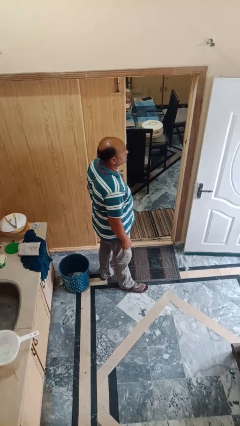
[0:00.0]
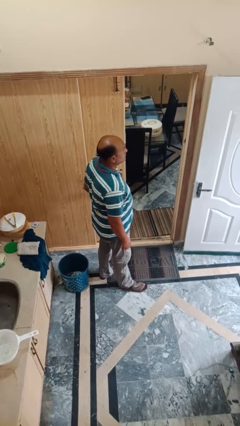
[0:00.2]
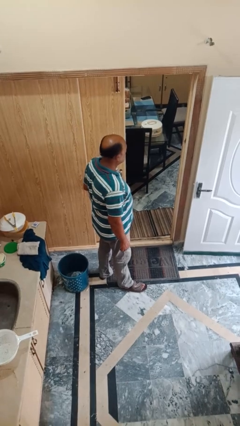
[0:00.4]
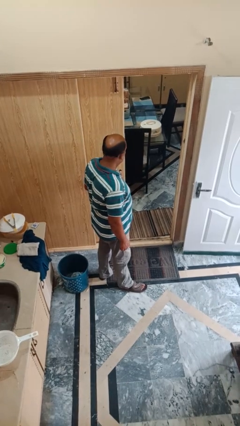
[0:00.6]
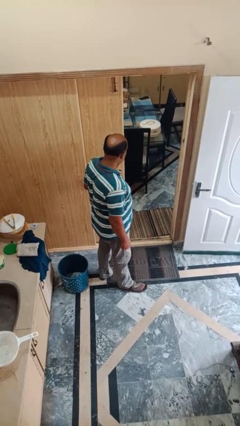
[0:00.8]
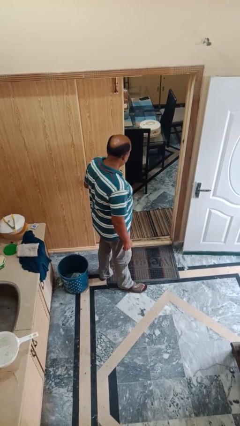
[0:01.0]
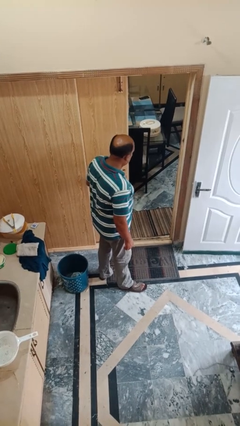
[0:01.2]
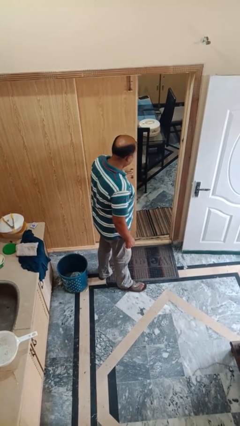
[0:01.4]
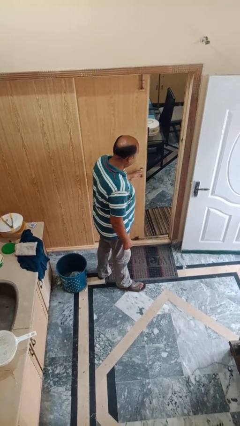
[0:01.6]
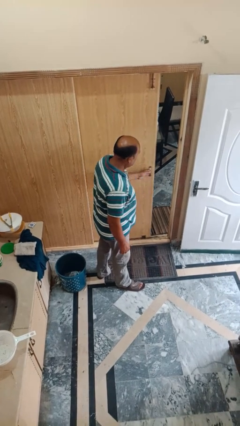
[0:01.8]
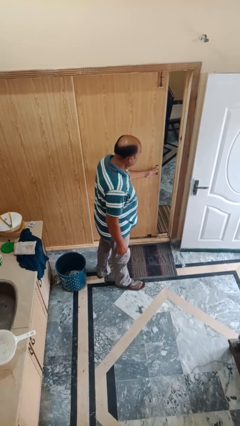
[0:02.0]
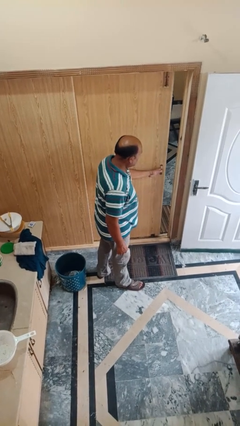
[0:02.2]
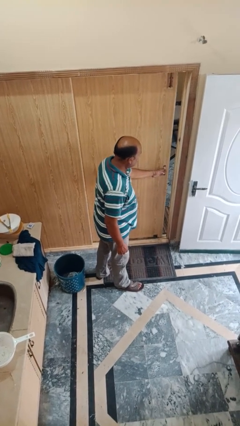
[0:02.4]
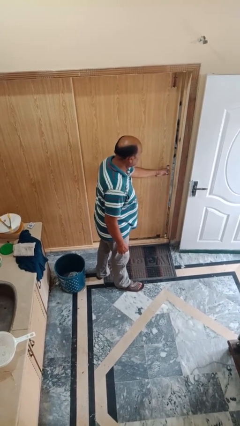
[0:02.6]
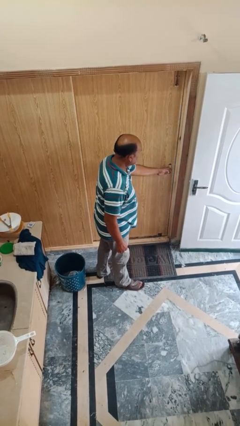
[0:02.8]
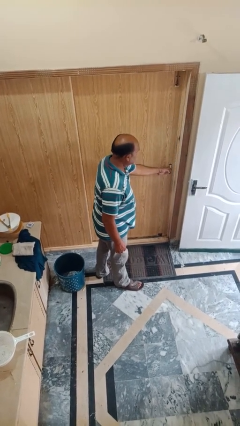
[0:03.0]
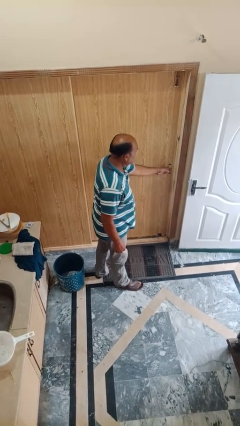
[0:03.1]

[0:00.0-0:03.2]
person closes sliding door

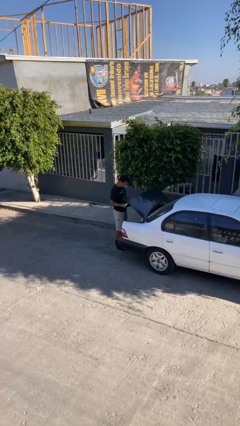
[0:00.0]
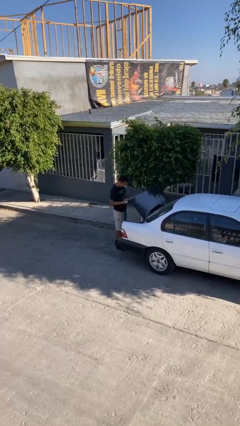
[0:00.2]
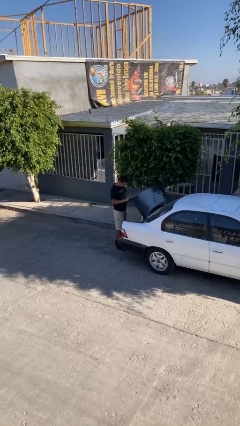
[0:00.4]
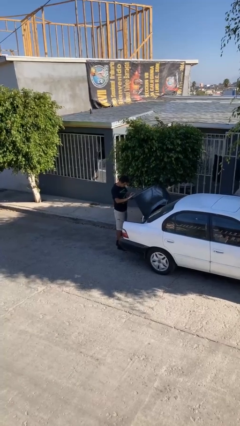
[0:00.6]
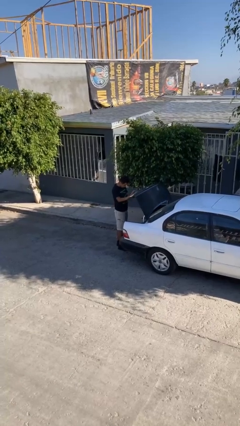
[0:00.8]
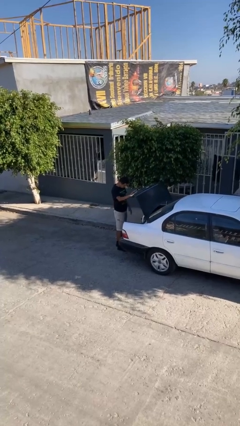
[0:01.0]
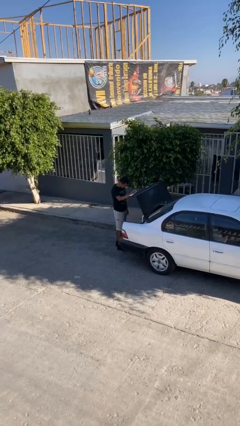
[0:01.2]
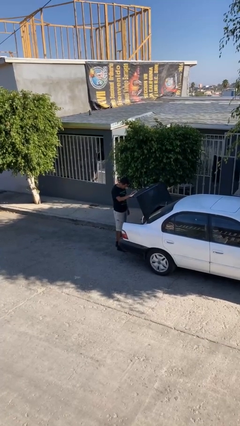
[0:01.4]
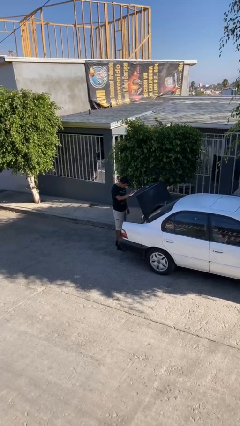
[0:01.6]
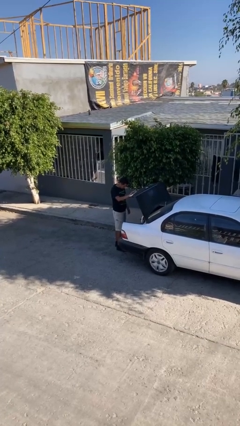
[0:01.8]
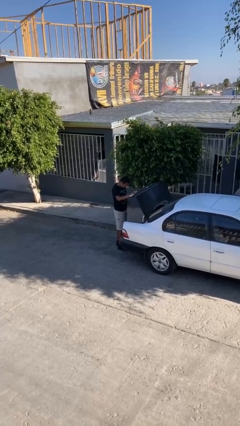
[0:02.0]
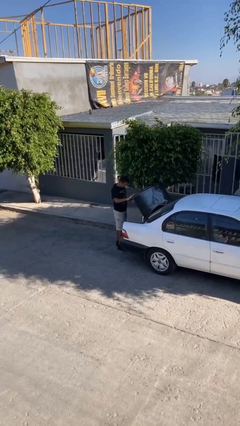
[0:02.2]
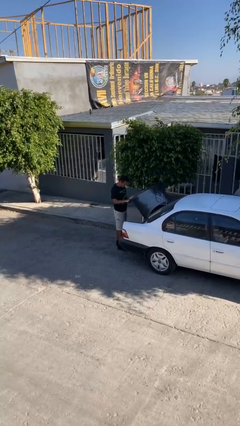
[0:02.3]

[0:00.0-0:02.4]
person opens car trunk

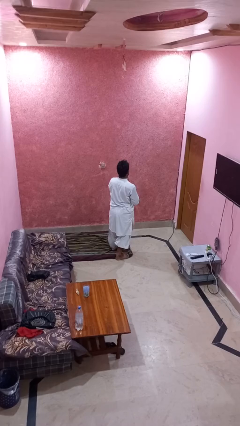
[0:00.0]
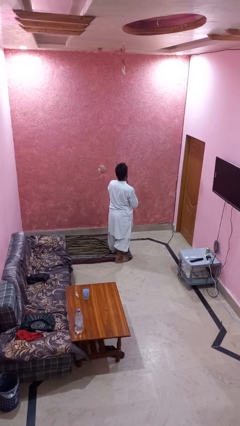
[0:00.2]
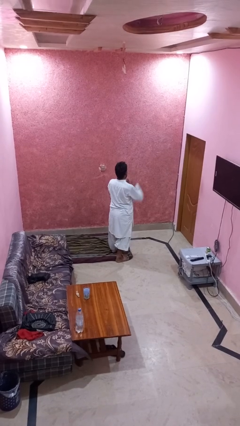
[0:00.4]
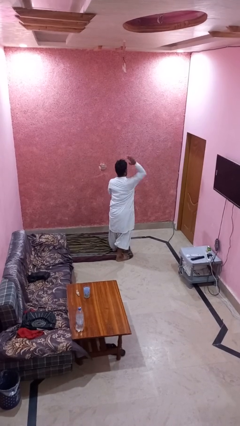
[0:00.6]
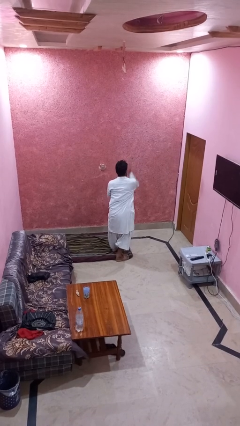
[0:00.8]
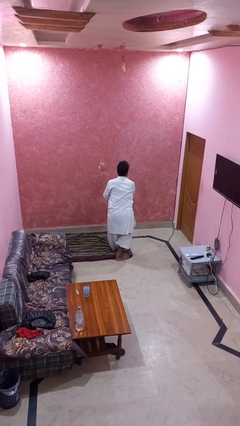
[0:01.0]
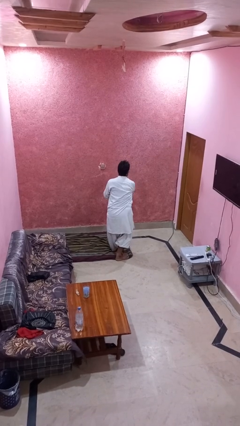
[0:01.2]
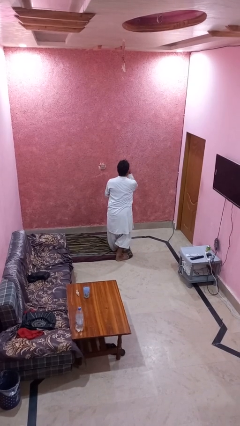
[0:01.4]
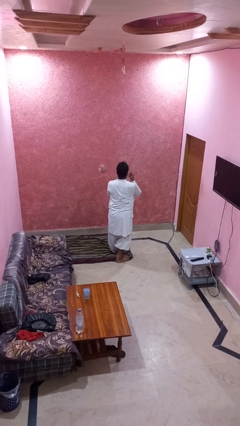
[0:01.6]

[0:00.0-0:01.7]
person karate chop

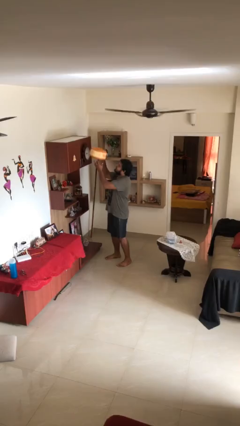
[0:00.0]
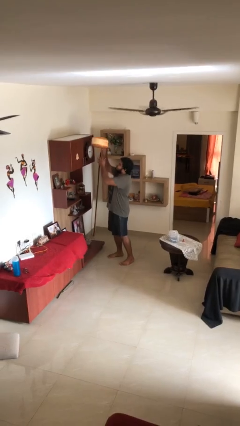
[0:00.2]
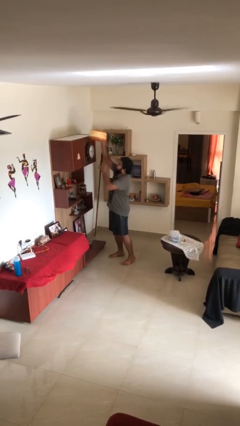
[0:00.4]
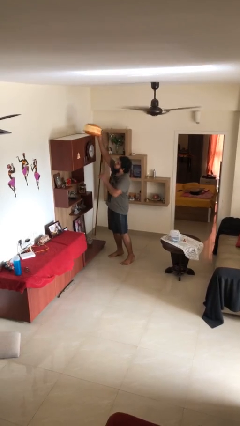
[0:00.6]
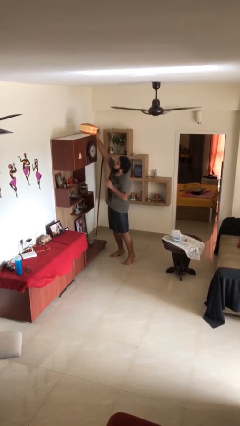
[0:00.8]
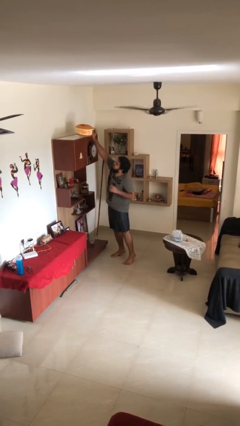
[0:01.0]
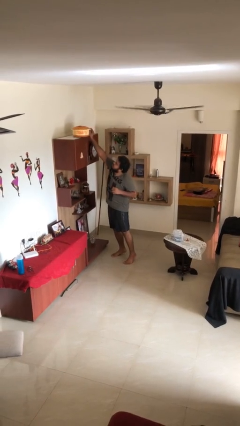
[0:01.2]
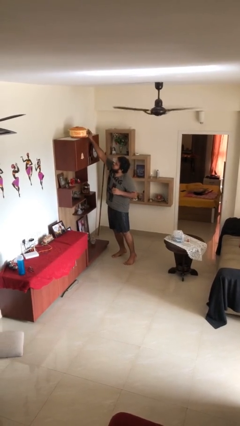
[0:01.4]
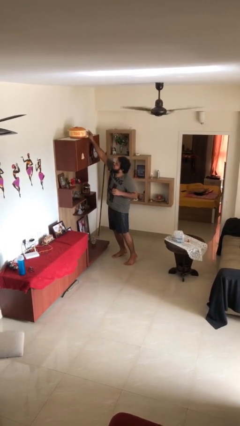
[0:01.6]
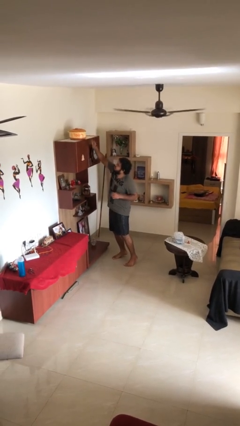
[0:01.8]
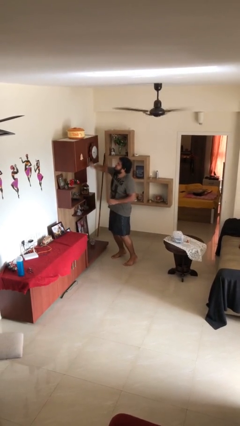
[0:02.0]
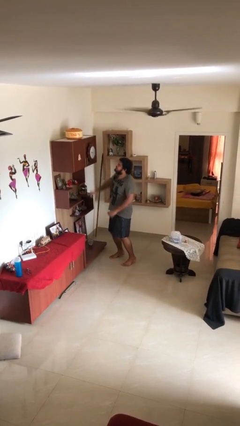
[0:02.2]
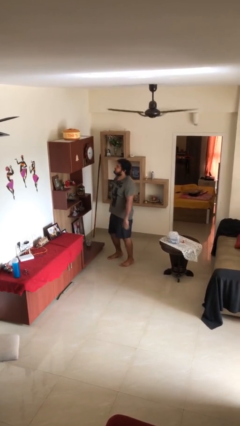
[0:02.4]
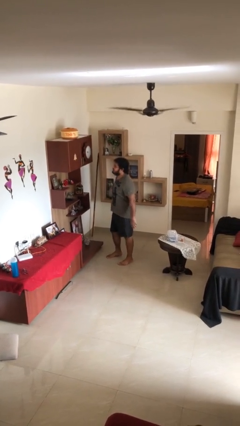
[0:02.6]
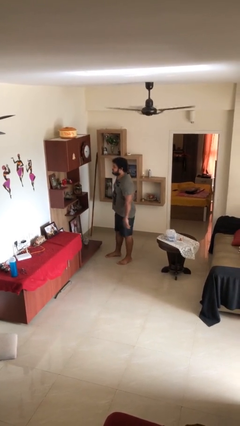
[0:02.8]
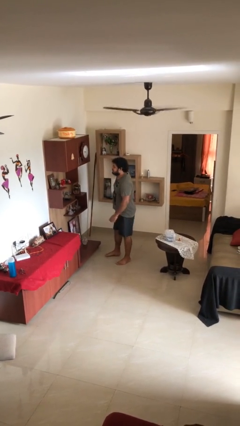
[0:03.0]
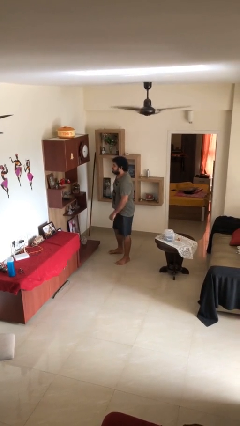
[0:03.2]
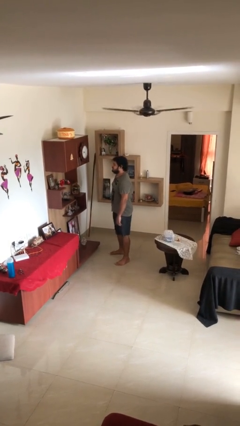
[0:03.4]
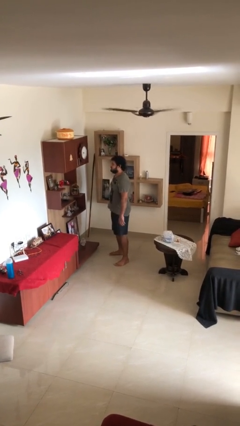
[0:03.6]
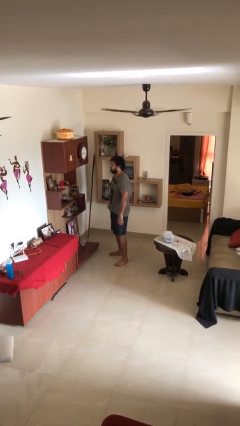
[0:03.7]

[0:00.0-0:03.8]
person puts down object on shelf

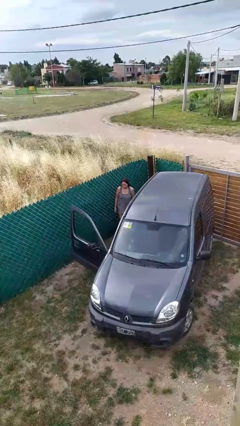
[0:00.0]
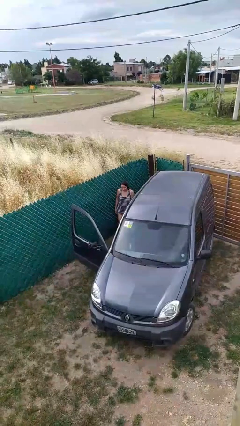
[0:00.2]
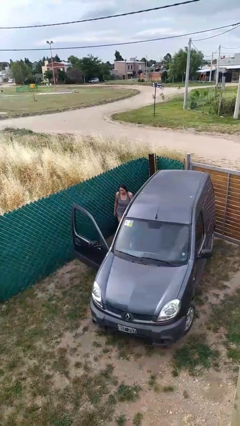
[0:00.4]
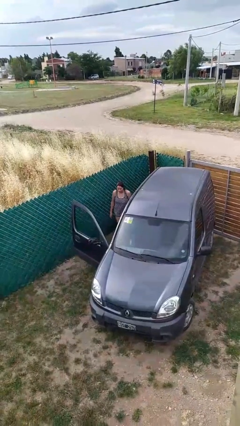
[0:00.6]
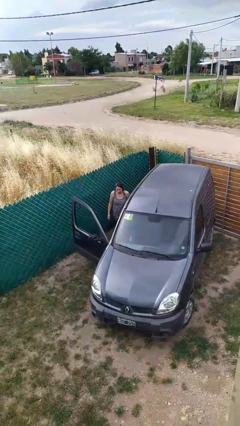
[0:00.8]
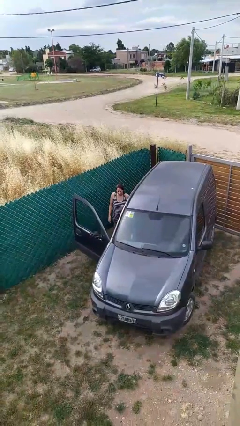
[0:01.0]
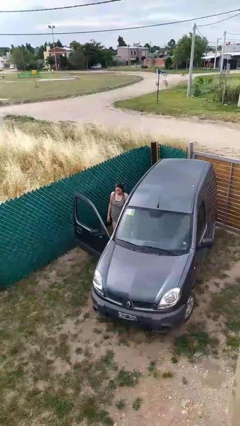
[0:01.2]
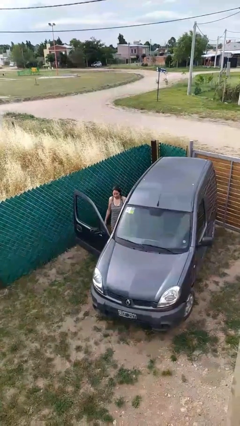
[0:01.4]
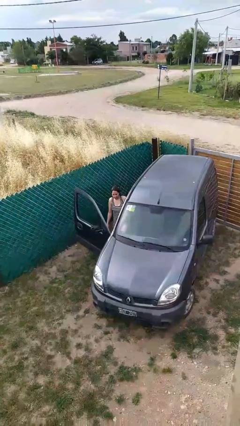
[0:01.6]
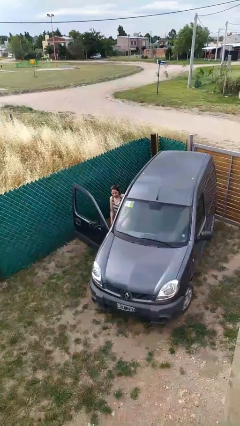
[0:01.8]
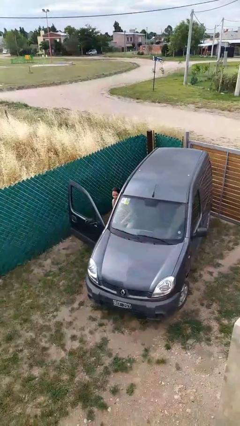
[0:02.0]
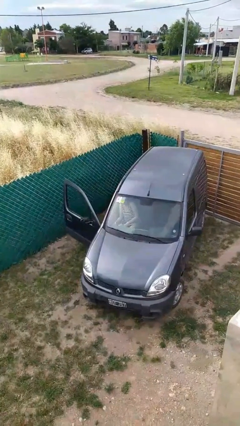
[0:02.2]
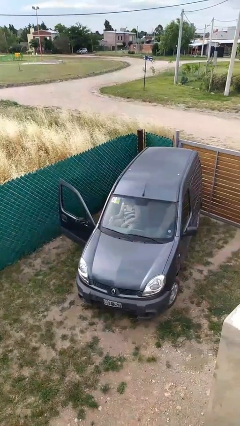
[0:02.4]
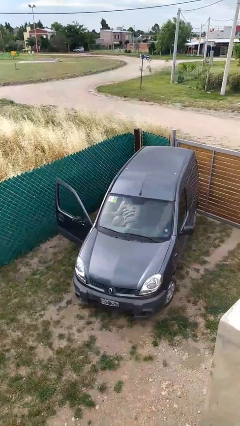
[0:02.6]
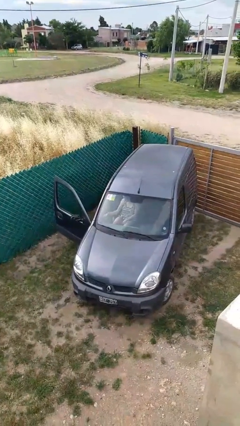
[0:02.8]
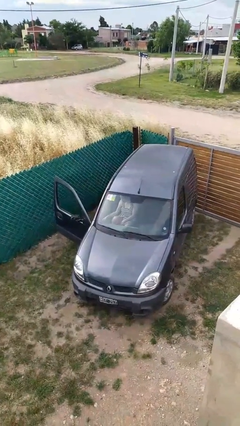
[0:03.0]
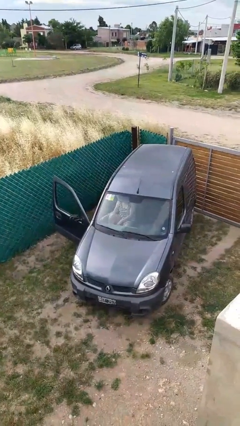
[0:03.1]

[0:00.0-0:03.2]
person enters car

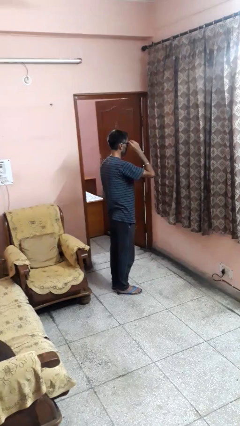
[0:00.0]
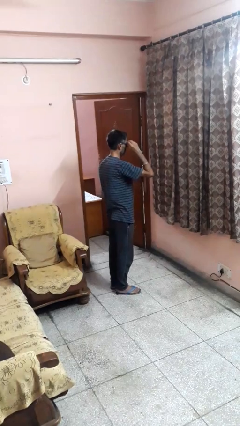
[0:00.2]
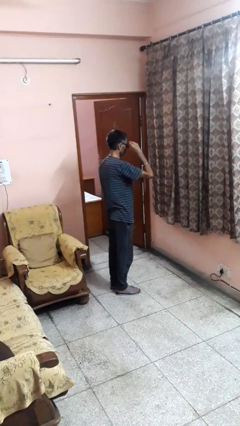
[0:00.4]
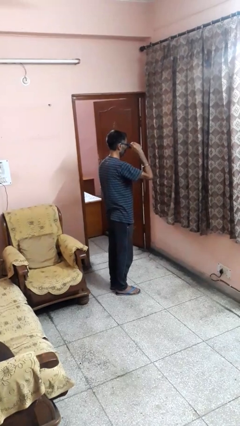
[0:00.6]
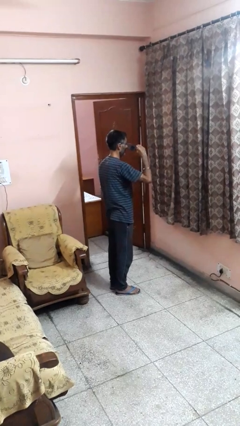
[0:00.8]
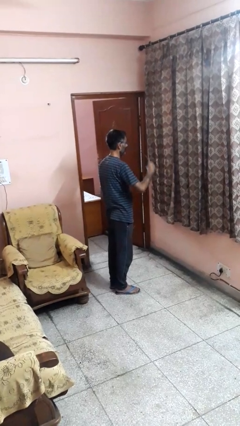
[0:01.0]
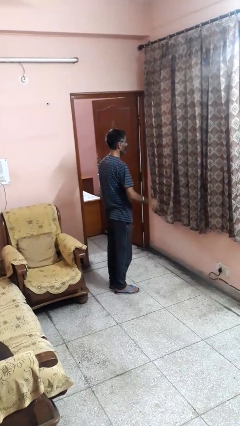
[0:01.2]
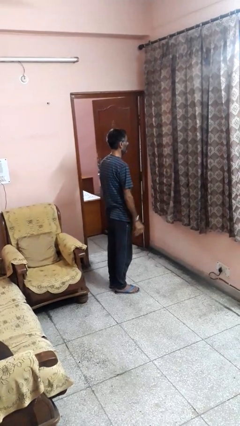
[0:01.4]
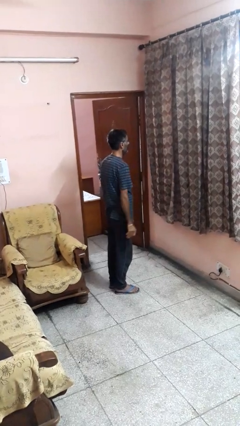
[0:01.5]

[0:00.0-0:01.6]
person takes off sunglasses

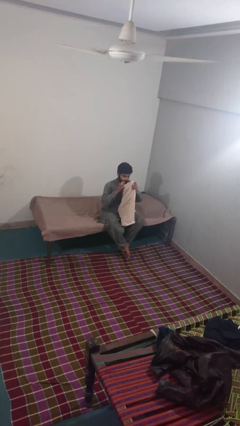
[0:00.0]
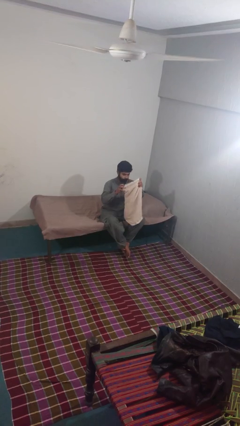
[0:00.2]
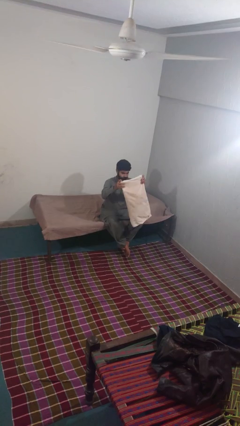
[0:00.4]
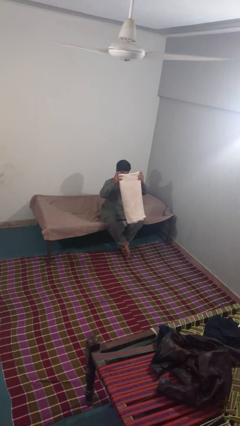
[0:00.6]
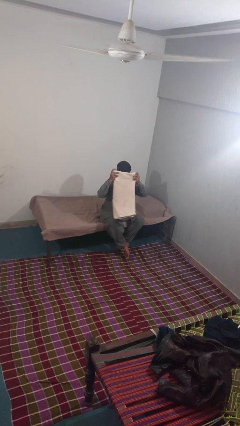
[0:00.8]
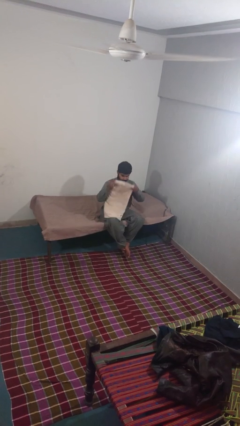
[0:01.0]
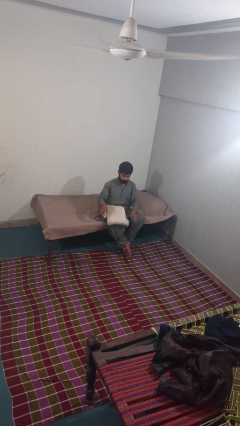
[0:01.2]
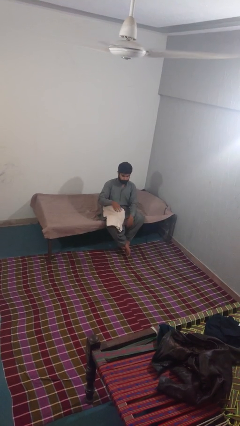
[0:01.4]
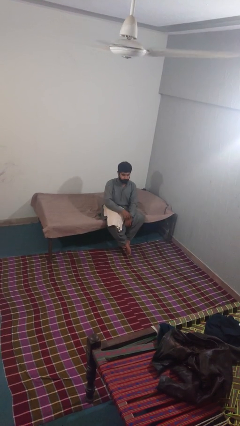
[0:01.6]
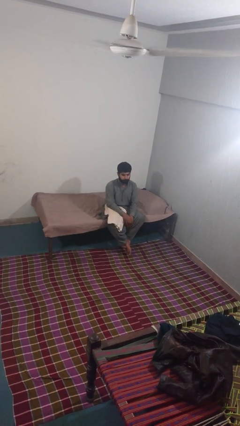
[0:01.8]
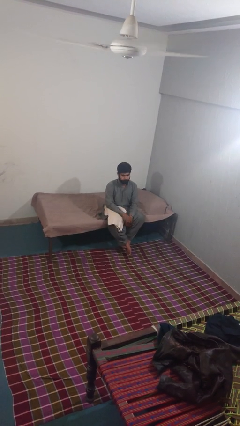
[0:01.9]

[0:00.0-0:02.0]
person folds towel
